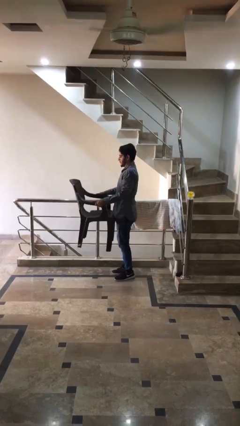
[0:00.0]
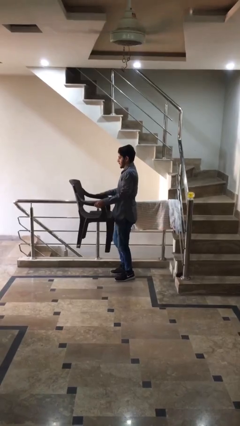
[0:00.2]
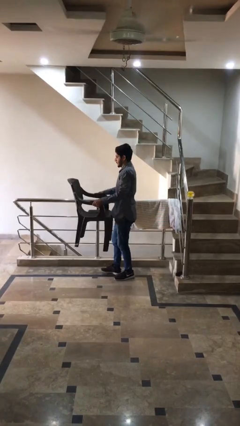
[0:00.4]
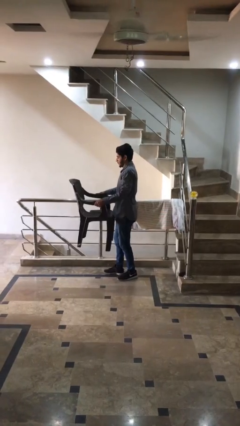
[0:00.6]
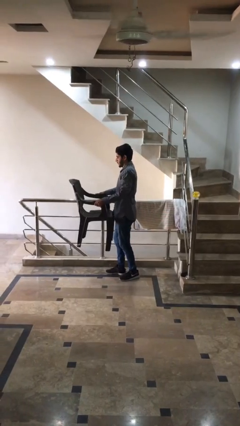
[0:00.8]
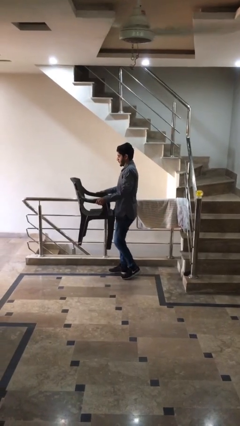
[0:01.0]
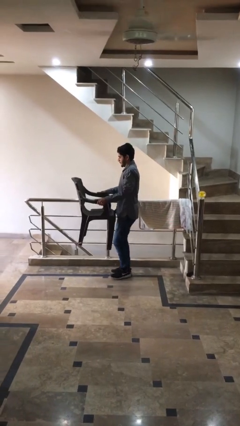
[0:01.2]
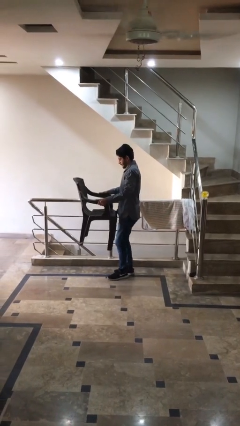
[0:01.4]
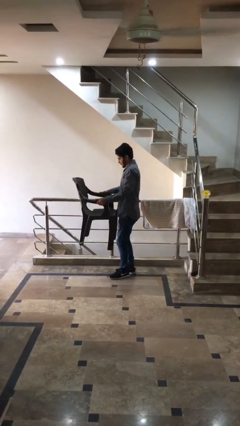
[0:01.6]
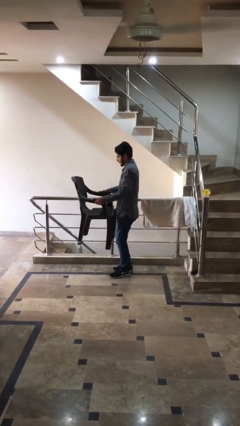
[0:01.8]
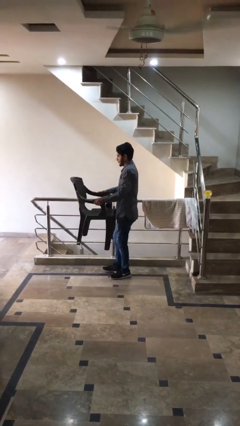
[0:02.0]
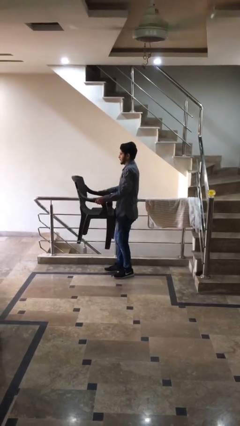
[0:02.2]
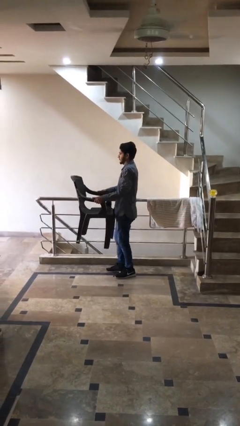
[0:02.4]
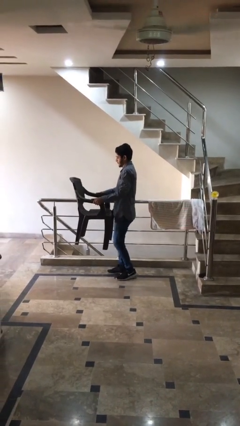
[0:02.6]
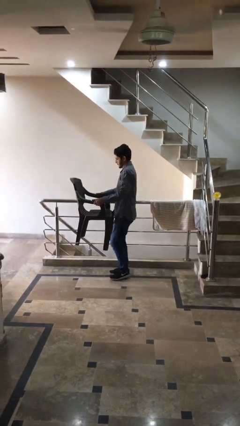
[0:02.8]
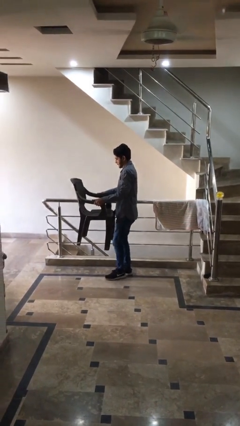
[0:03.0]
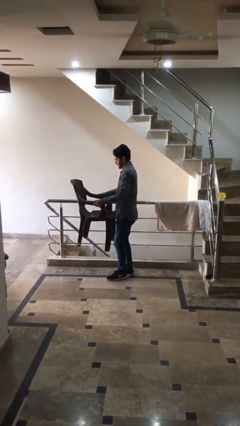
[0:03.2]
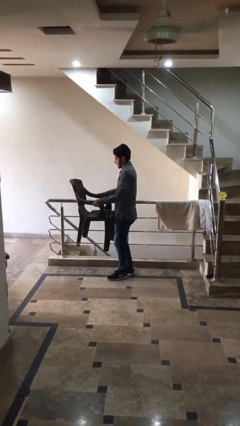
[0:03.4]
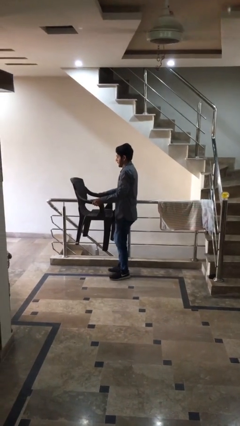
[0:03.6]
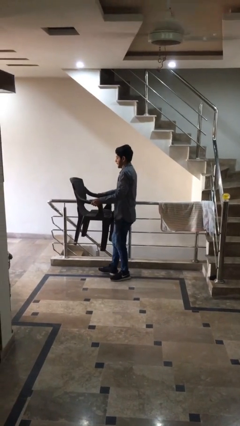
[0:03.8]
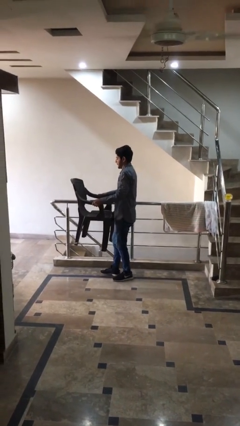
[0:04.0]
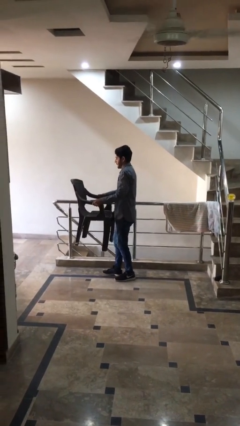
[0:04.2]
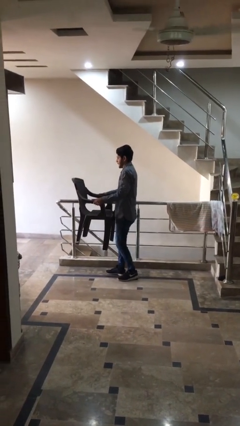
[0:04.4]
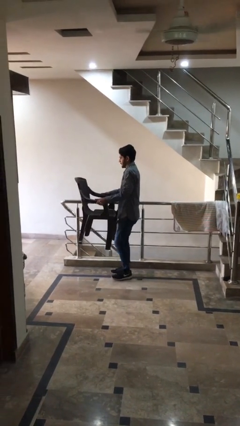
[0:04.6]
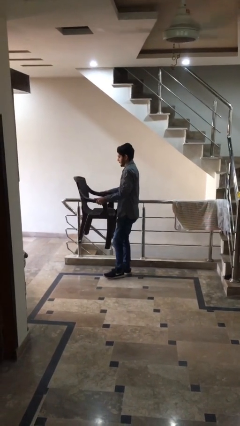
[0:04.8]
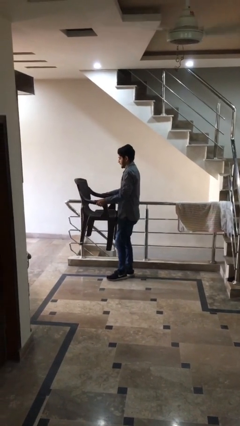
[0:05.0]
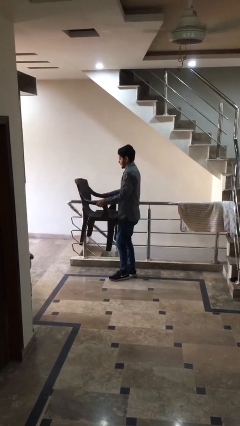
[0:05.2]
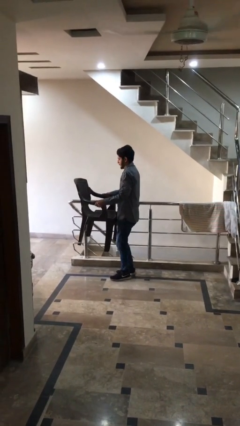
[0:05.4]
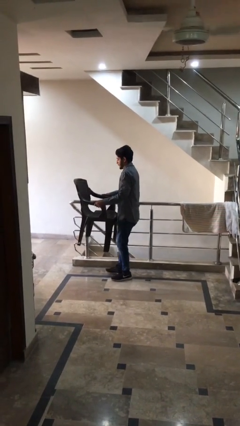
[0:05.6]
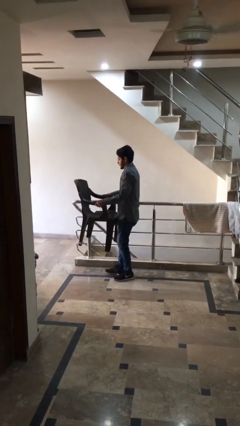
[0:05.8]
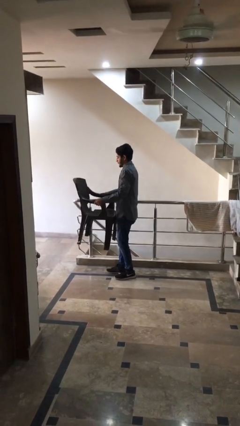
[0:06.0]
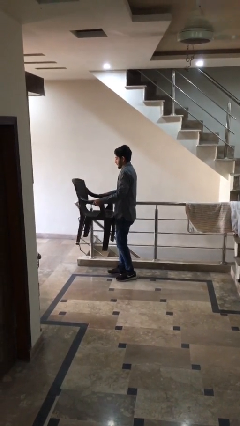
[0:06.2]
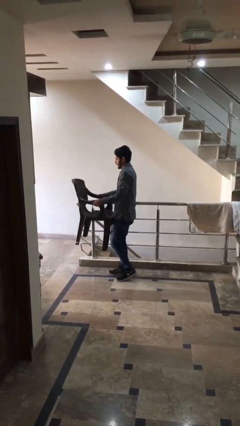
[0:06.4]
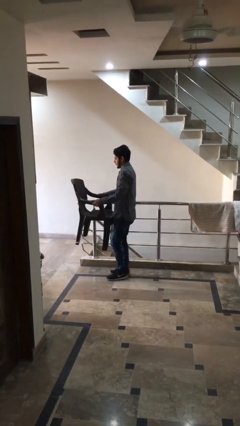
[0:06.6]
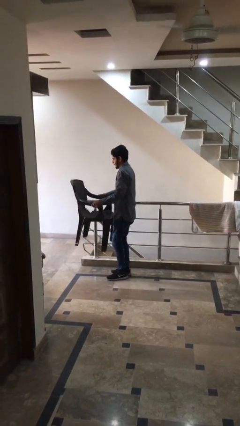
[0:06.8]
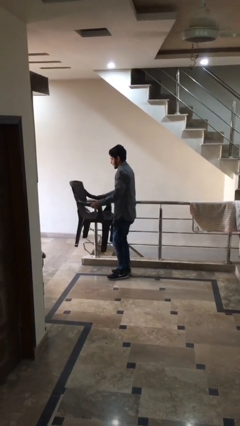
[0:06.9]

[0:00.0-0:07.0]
person carries heavy object

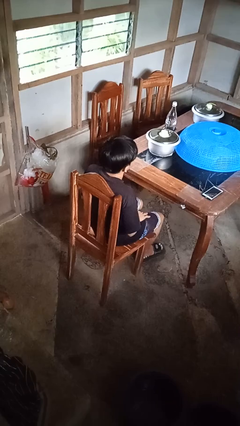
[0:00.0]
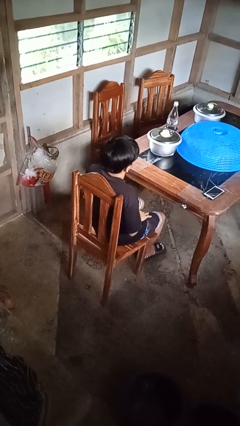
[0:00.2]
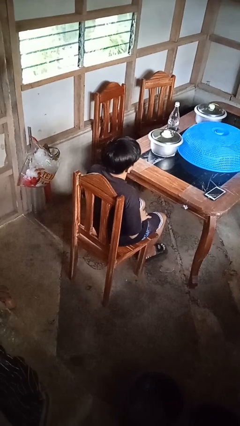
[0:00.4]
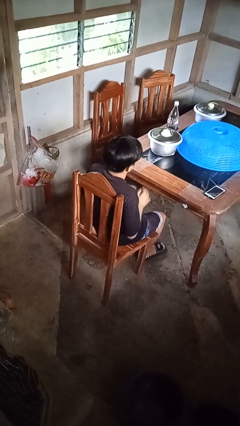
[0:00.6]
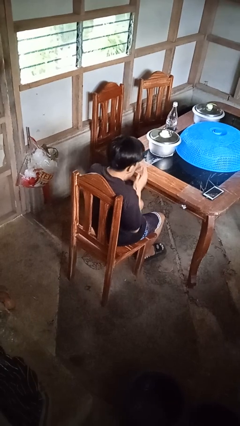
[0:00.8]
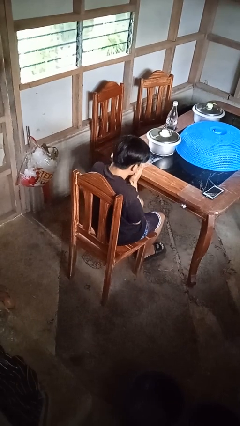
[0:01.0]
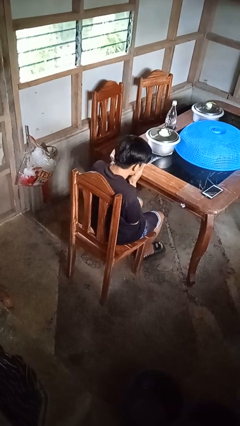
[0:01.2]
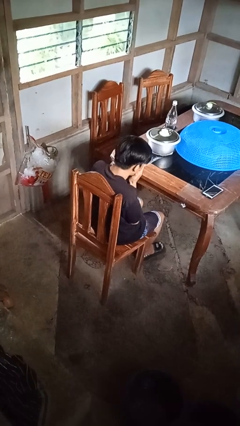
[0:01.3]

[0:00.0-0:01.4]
person sneezes into hand

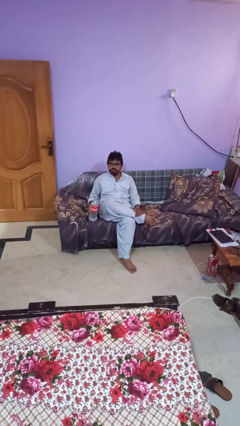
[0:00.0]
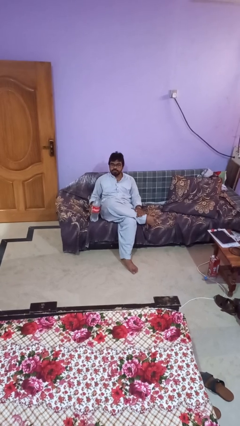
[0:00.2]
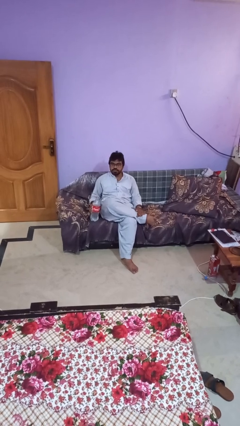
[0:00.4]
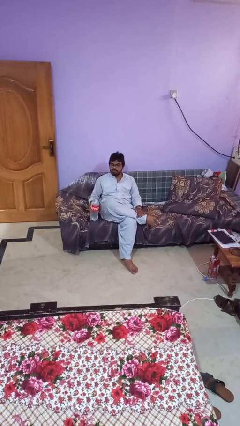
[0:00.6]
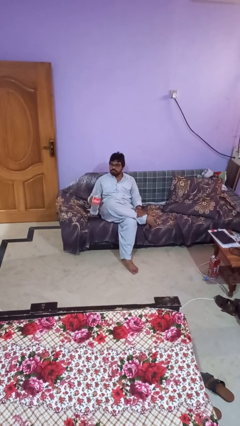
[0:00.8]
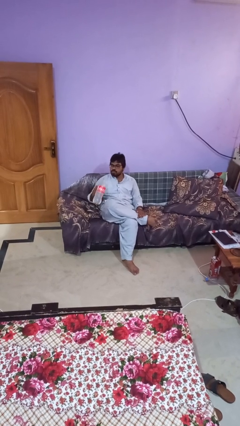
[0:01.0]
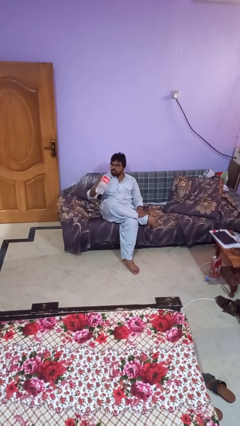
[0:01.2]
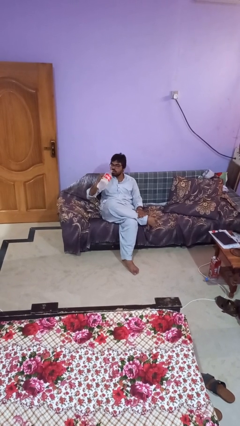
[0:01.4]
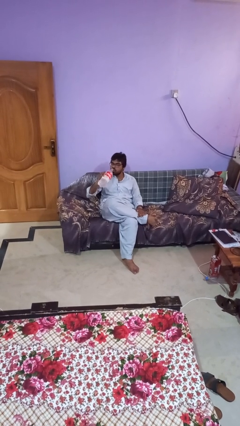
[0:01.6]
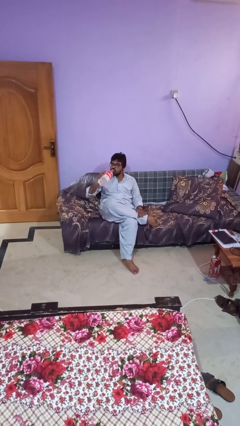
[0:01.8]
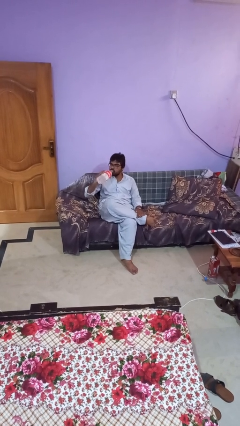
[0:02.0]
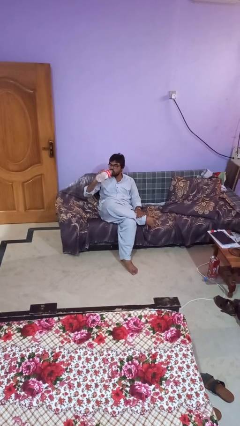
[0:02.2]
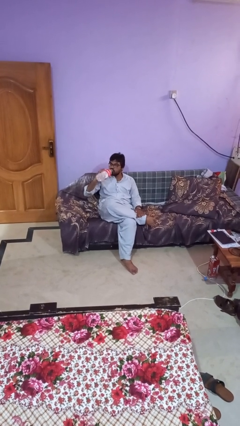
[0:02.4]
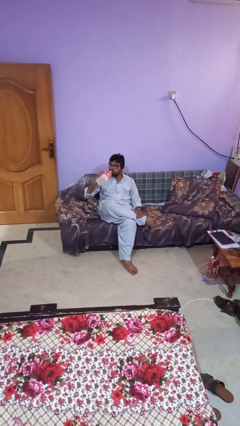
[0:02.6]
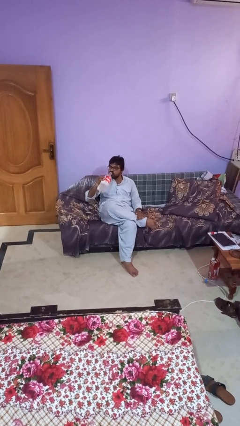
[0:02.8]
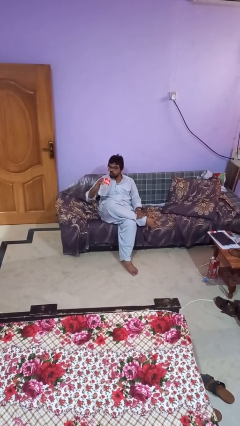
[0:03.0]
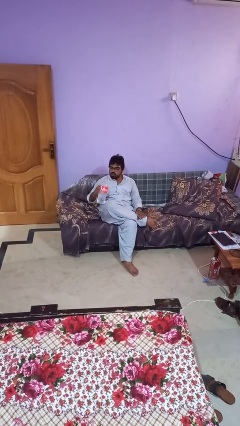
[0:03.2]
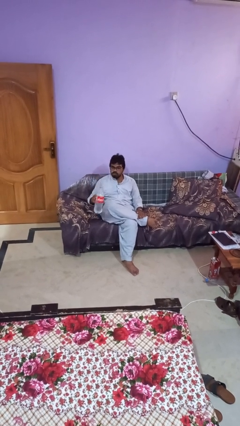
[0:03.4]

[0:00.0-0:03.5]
person drinks from bottle

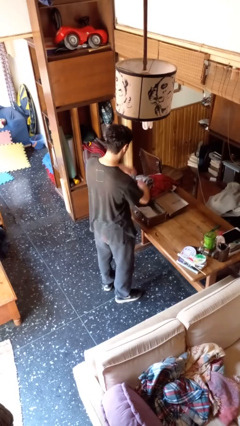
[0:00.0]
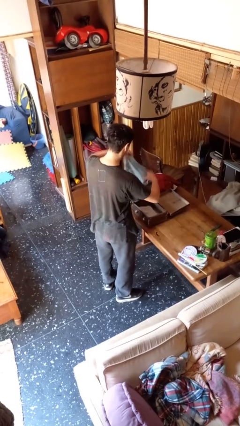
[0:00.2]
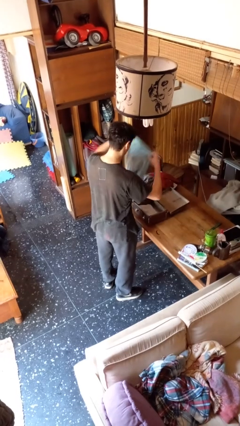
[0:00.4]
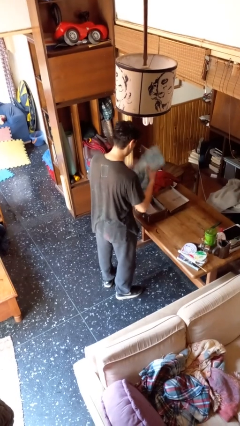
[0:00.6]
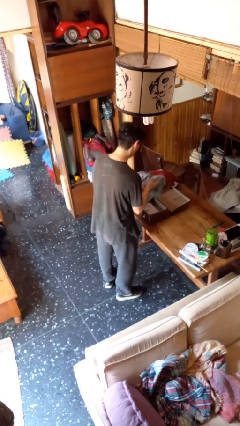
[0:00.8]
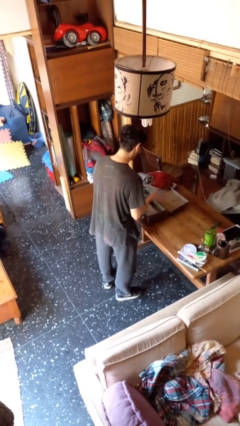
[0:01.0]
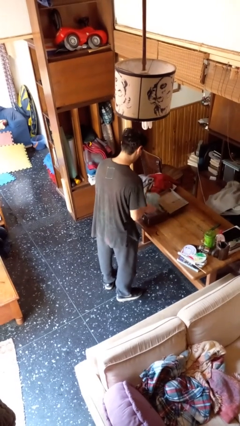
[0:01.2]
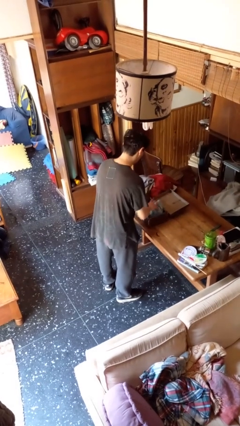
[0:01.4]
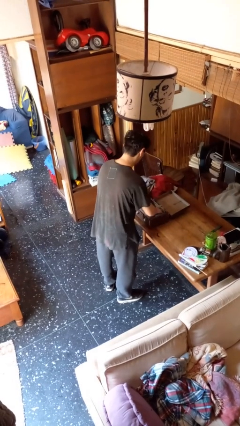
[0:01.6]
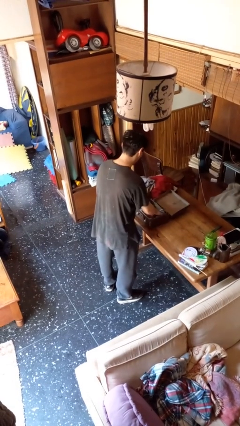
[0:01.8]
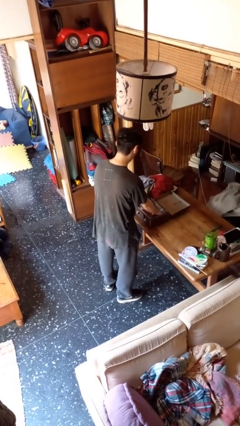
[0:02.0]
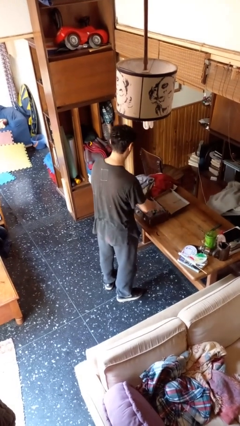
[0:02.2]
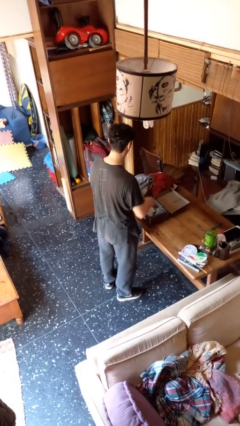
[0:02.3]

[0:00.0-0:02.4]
person loads clothes into suitcase

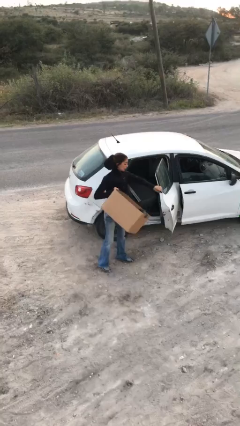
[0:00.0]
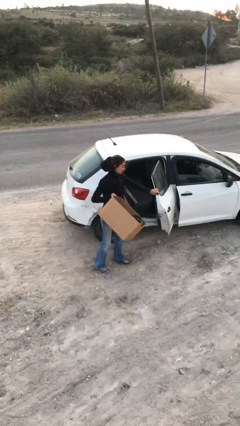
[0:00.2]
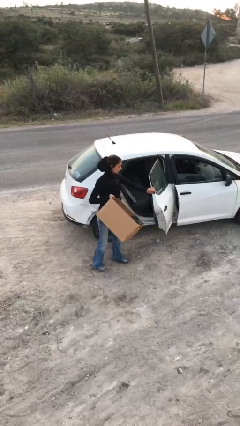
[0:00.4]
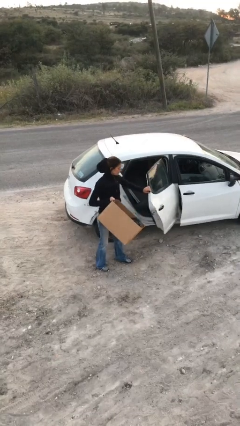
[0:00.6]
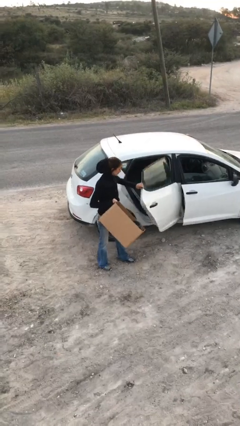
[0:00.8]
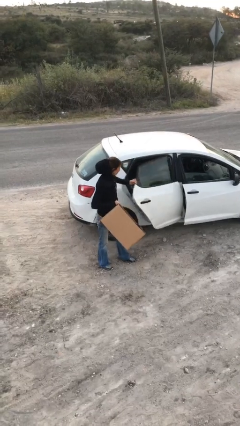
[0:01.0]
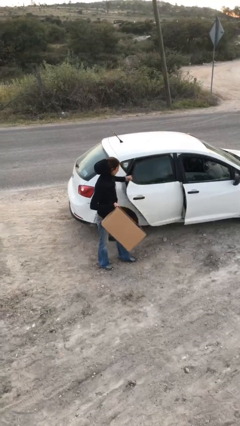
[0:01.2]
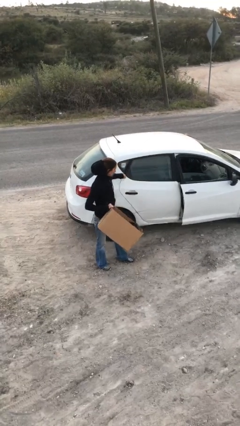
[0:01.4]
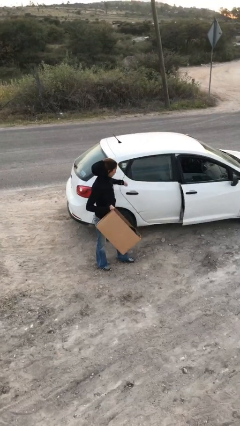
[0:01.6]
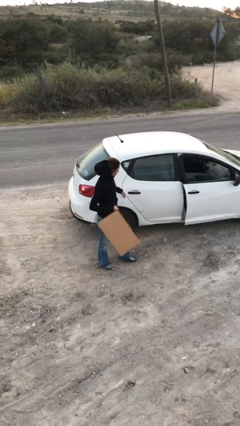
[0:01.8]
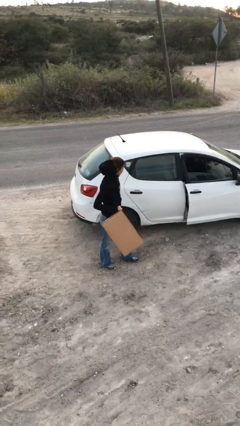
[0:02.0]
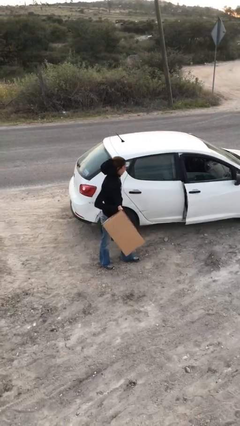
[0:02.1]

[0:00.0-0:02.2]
person closes car door

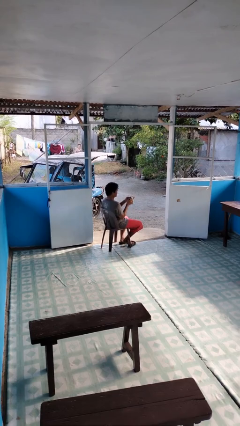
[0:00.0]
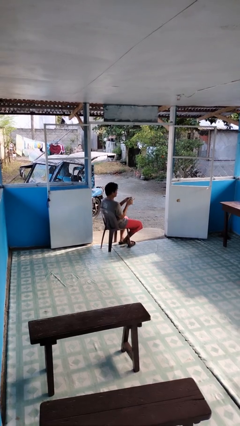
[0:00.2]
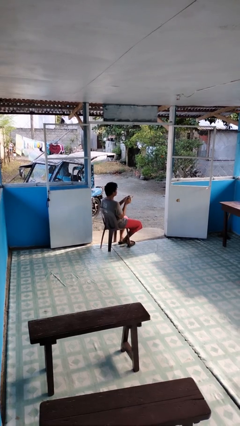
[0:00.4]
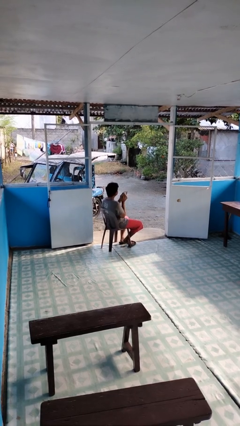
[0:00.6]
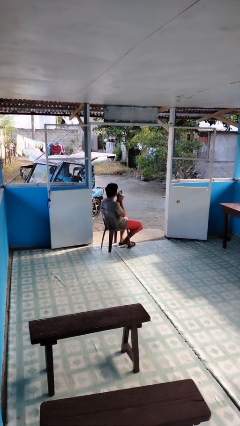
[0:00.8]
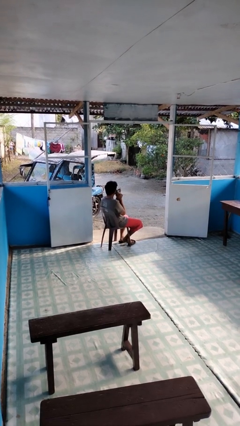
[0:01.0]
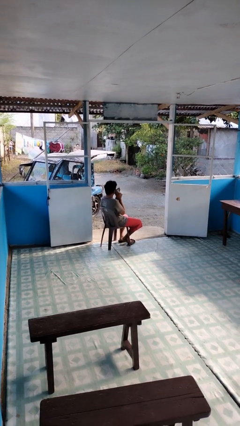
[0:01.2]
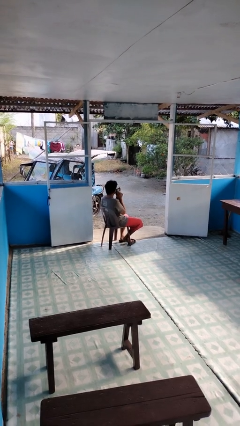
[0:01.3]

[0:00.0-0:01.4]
person hugs cat
